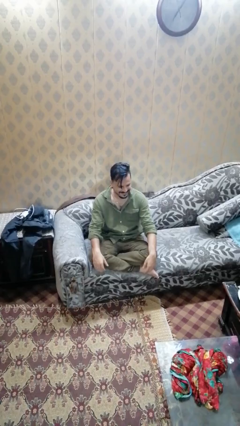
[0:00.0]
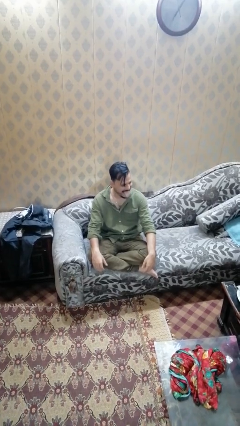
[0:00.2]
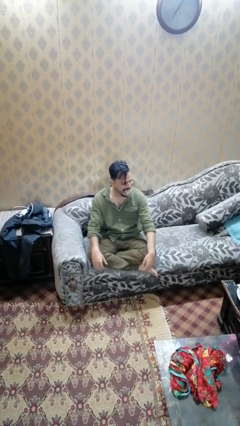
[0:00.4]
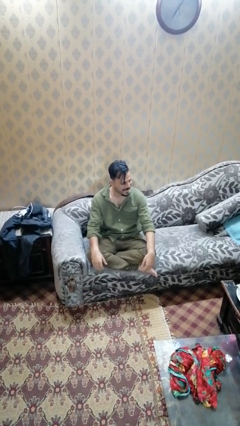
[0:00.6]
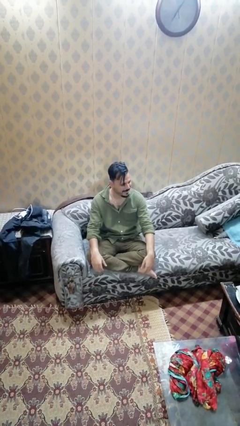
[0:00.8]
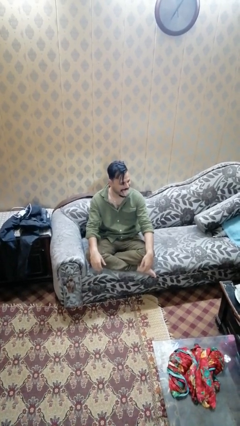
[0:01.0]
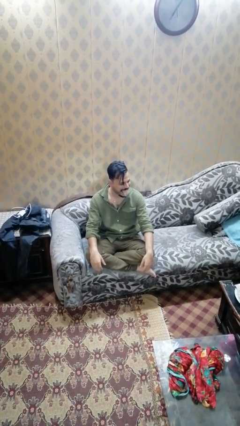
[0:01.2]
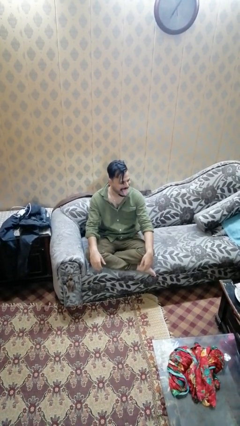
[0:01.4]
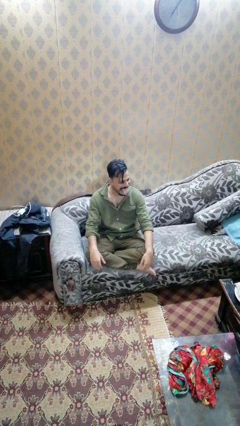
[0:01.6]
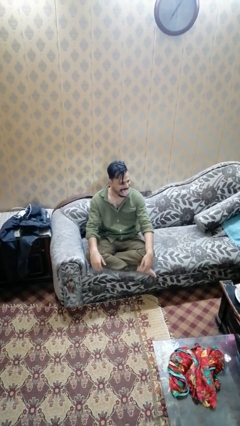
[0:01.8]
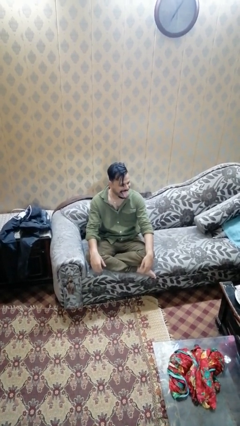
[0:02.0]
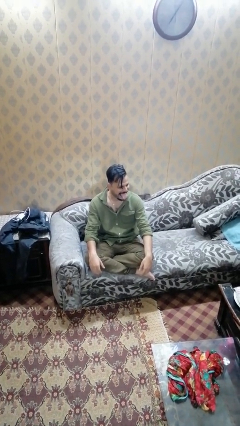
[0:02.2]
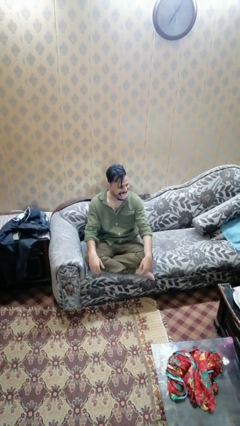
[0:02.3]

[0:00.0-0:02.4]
person sticks out tongue

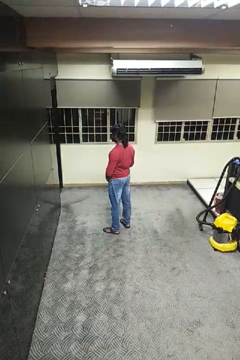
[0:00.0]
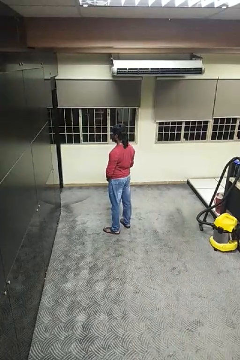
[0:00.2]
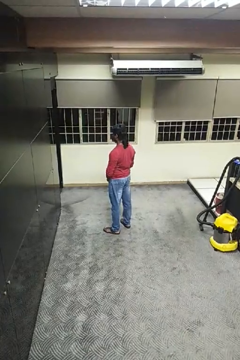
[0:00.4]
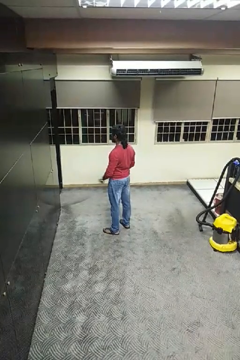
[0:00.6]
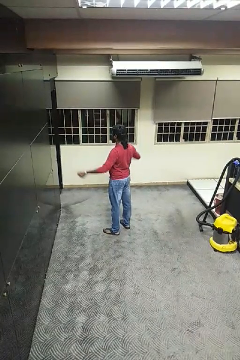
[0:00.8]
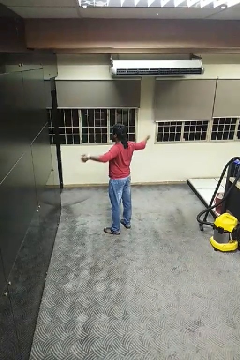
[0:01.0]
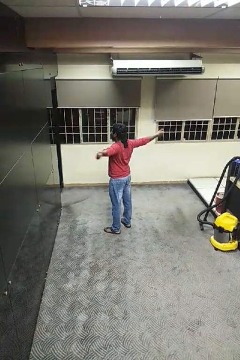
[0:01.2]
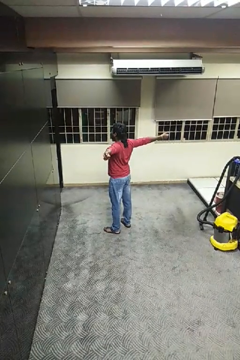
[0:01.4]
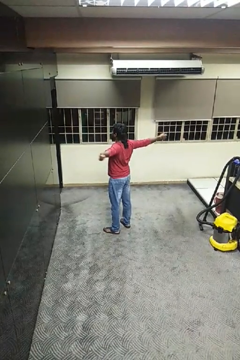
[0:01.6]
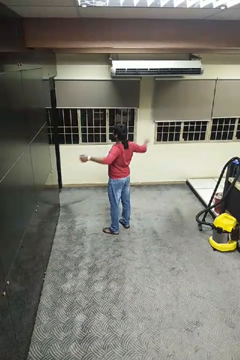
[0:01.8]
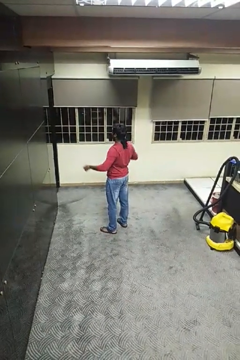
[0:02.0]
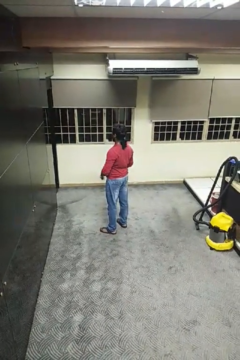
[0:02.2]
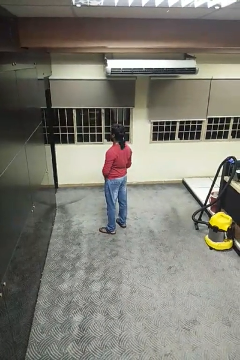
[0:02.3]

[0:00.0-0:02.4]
person stretches arms to side

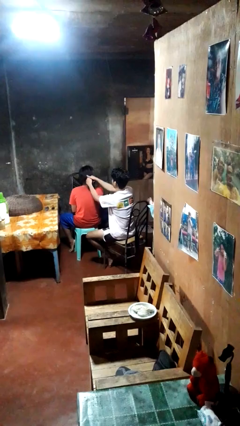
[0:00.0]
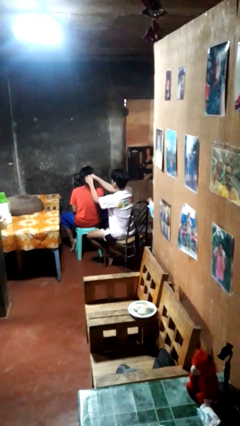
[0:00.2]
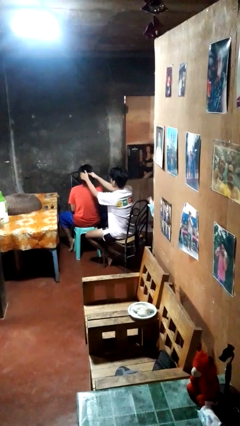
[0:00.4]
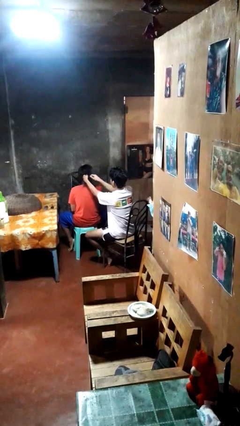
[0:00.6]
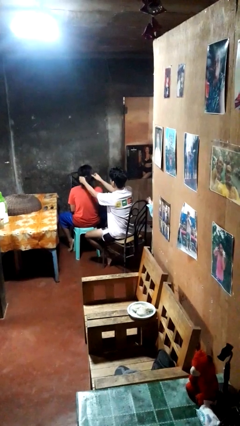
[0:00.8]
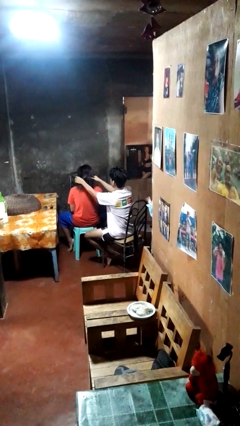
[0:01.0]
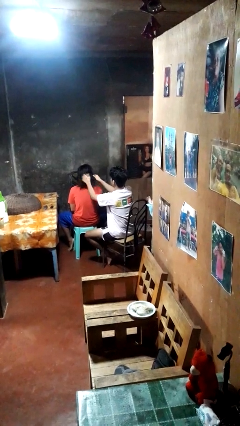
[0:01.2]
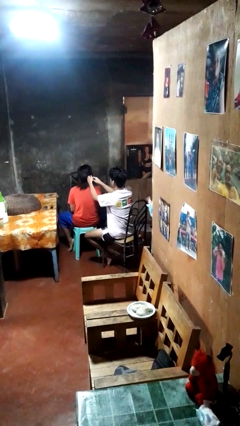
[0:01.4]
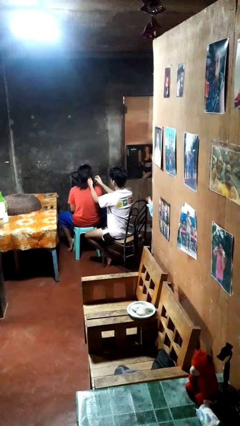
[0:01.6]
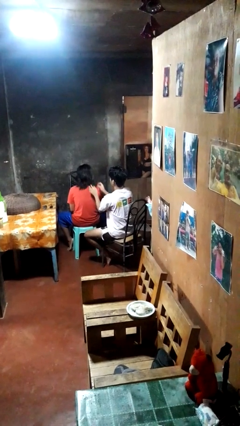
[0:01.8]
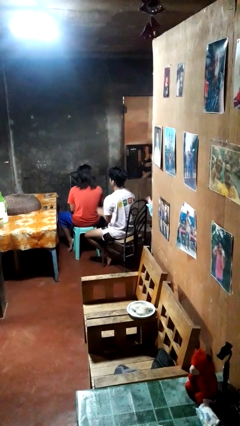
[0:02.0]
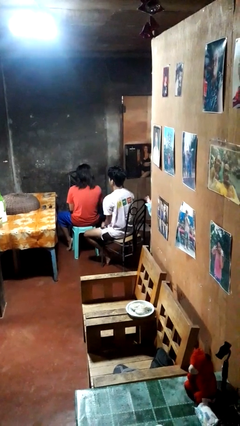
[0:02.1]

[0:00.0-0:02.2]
person braids hair of person

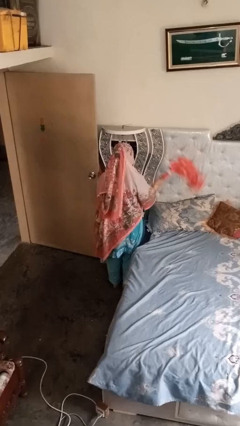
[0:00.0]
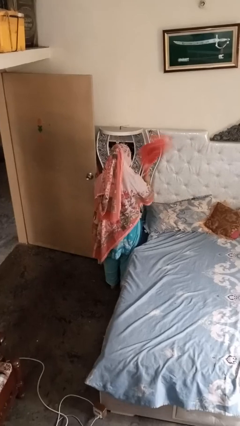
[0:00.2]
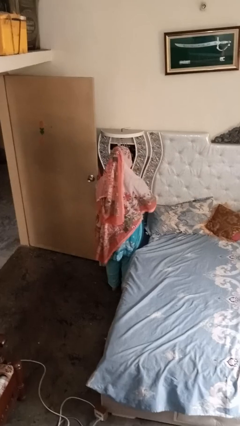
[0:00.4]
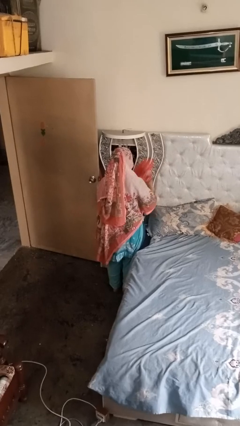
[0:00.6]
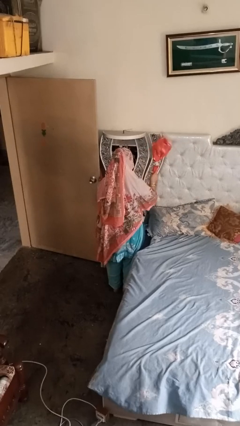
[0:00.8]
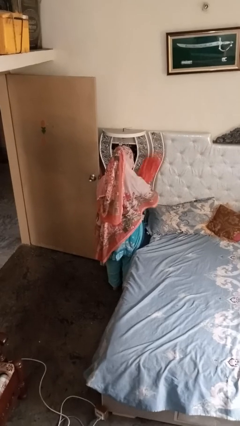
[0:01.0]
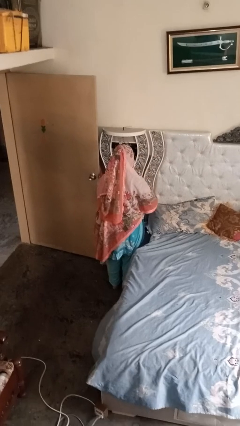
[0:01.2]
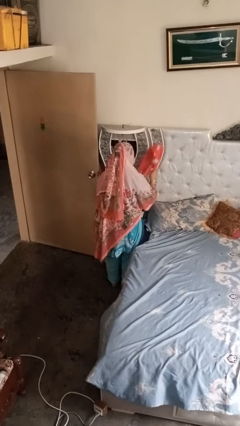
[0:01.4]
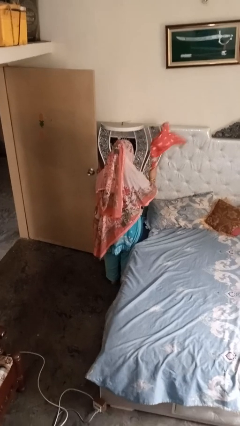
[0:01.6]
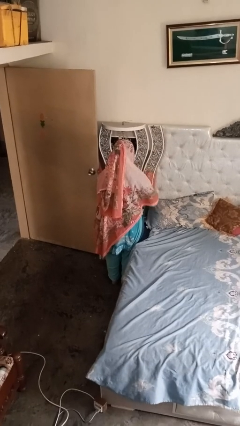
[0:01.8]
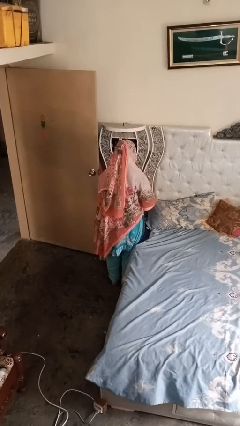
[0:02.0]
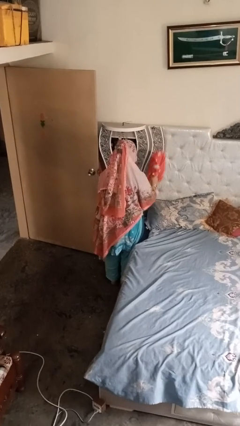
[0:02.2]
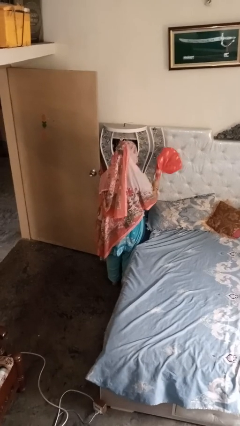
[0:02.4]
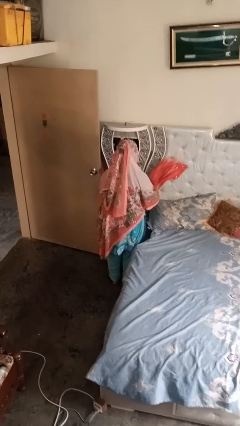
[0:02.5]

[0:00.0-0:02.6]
person dusts furniture

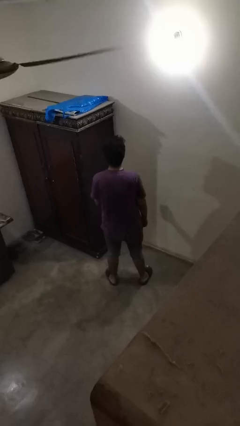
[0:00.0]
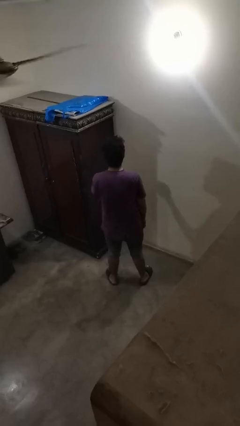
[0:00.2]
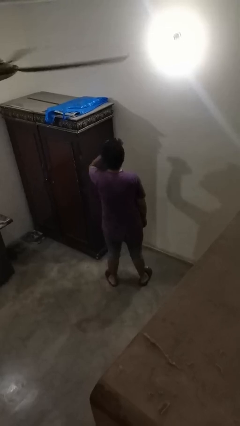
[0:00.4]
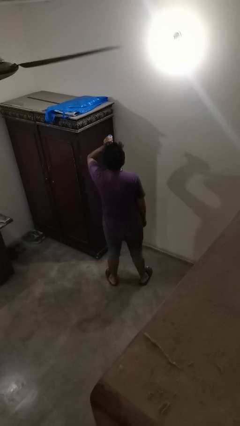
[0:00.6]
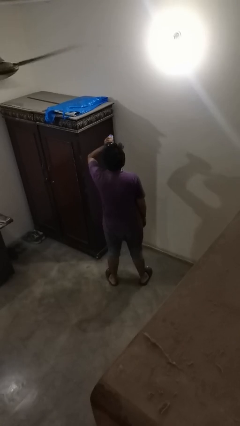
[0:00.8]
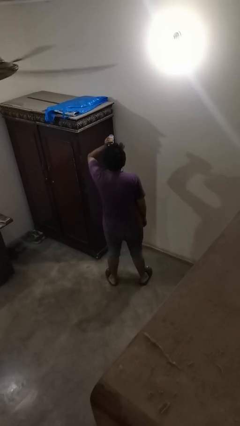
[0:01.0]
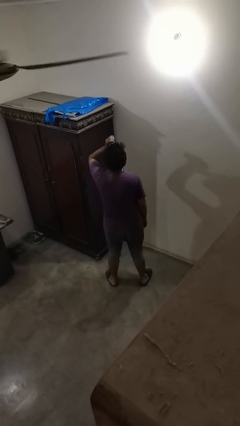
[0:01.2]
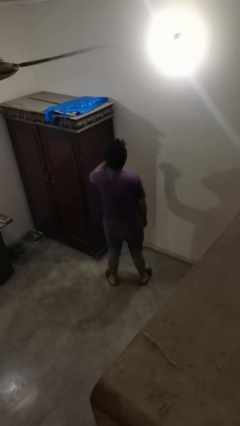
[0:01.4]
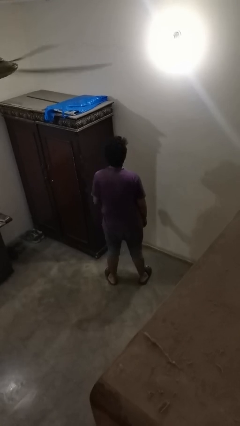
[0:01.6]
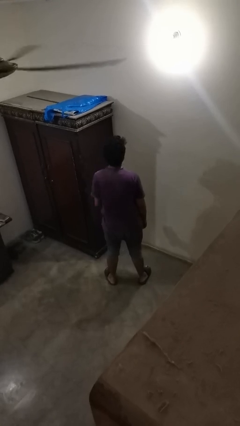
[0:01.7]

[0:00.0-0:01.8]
person drinks from beverage can

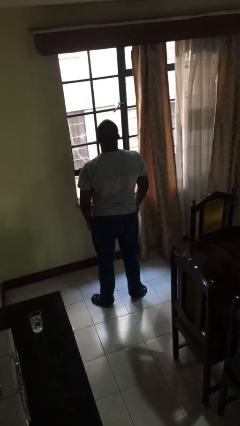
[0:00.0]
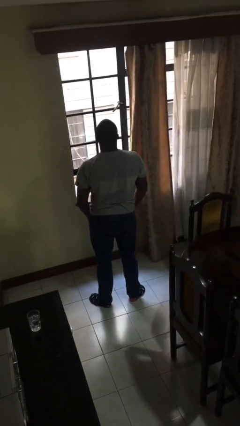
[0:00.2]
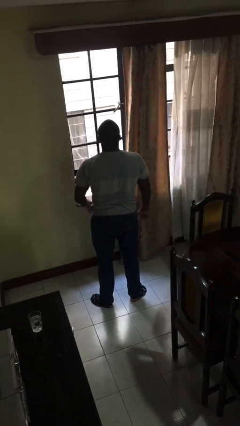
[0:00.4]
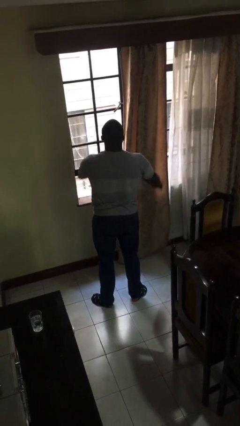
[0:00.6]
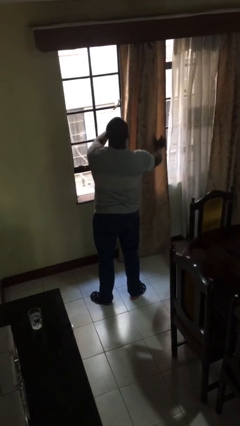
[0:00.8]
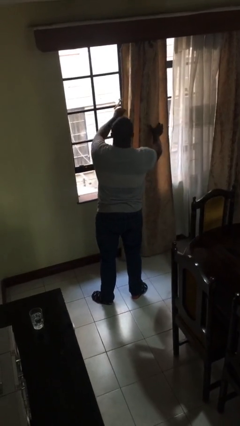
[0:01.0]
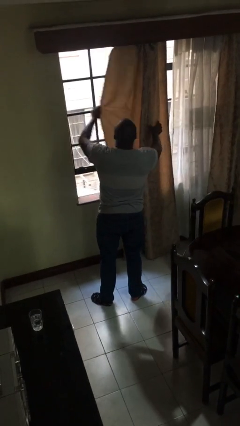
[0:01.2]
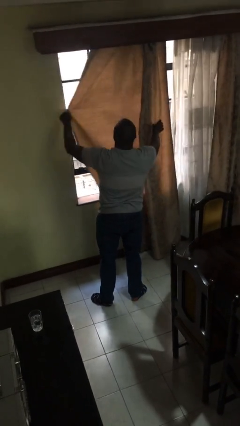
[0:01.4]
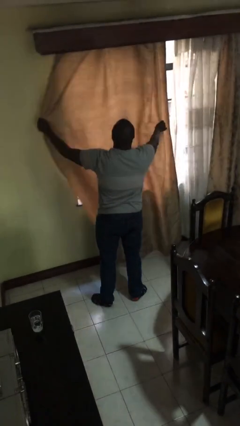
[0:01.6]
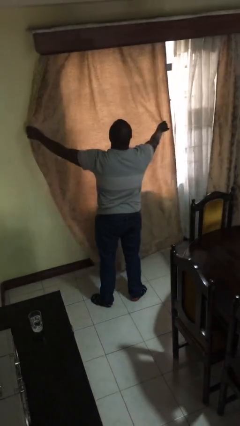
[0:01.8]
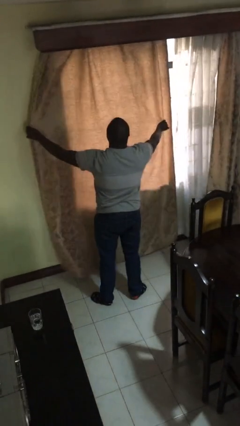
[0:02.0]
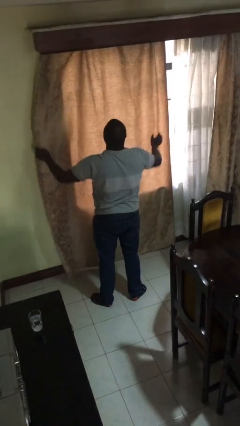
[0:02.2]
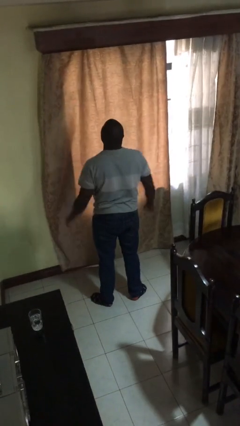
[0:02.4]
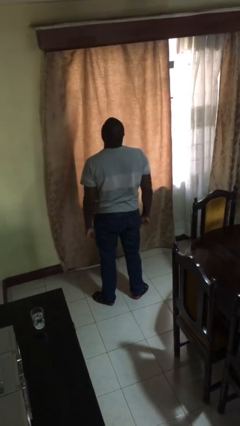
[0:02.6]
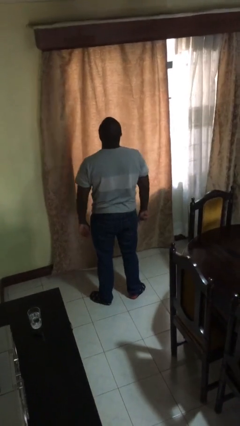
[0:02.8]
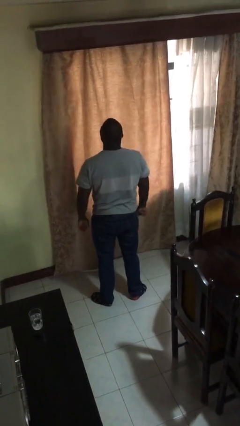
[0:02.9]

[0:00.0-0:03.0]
person closes curtains

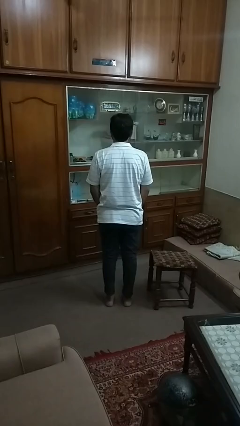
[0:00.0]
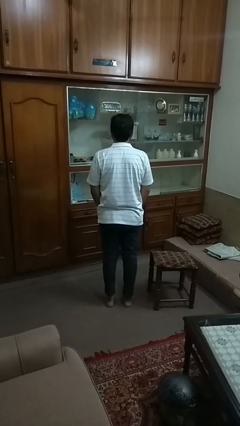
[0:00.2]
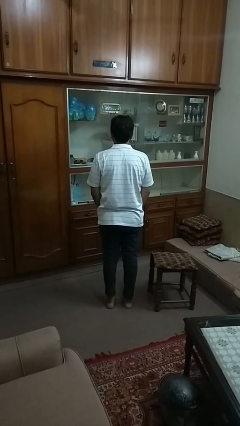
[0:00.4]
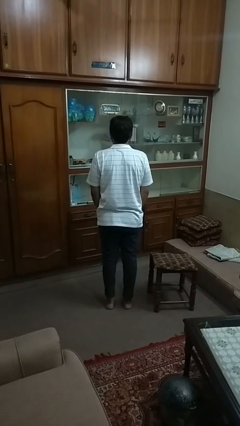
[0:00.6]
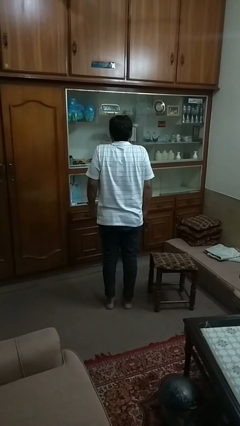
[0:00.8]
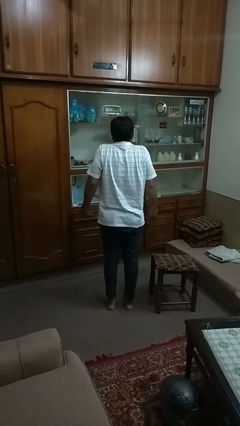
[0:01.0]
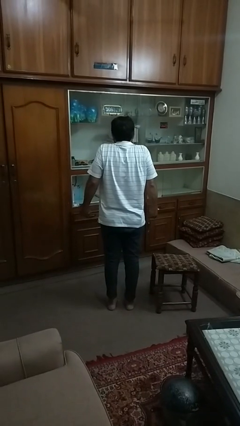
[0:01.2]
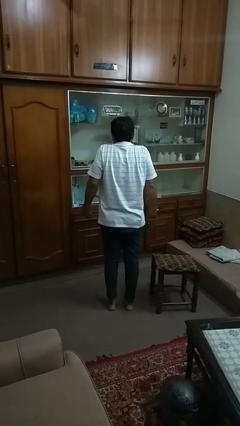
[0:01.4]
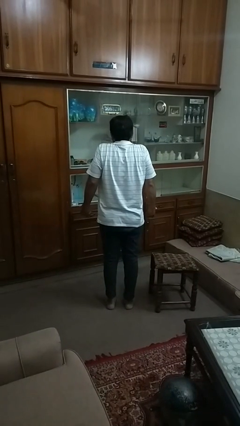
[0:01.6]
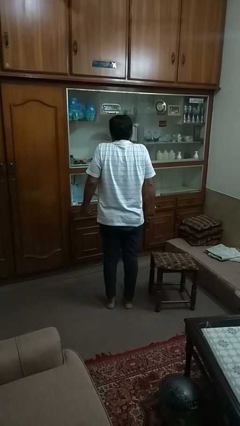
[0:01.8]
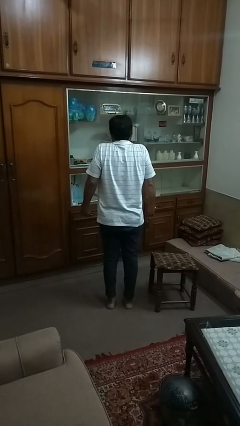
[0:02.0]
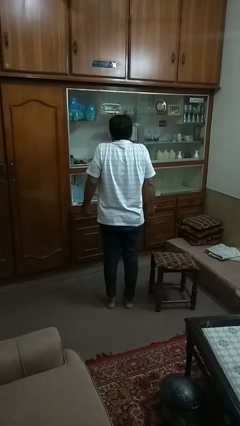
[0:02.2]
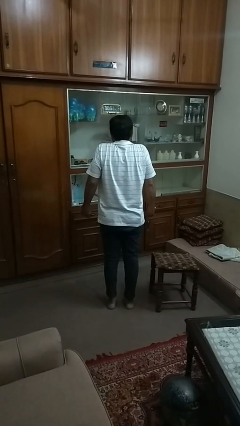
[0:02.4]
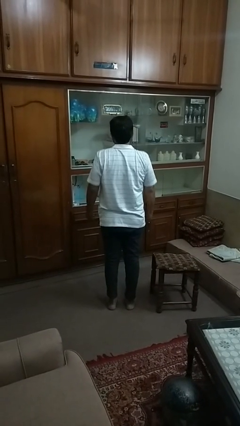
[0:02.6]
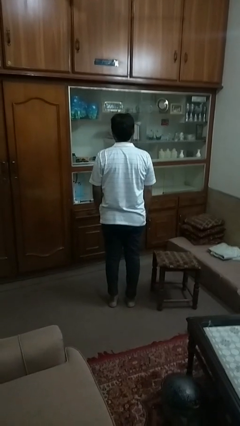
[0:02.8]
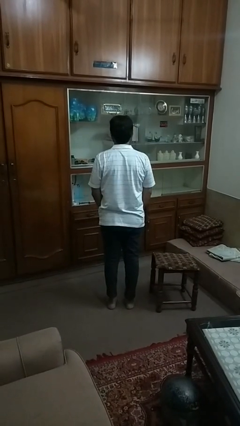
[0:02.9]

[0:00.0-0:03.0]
person shrugs

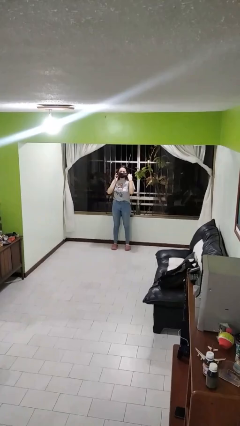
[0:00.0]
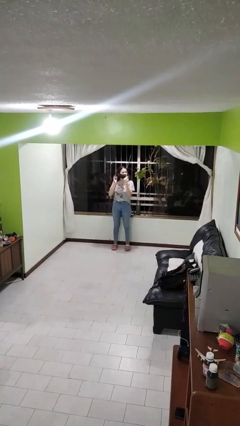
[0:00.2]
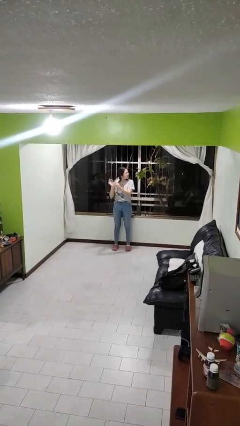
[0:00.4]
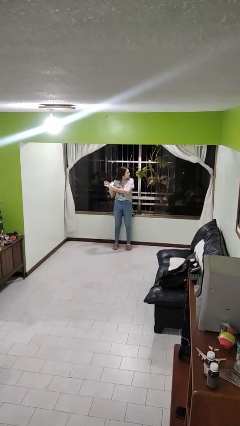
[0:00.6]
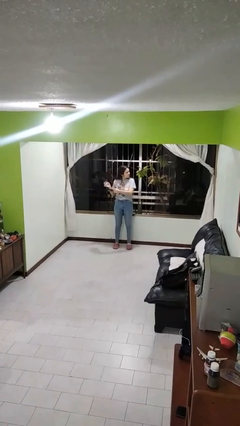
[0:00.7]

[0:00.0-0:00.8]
person takes off facemask
